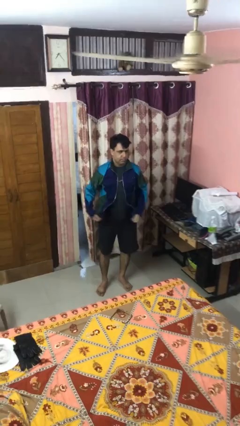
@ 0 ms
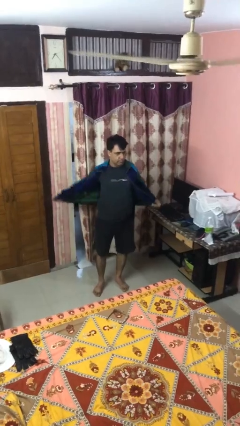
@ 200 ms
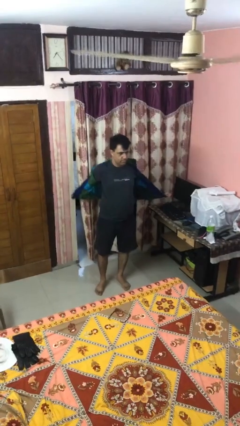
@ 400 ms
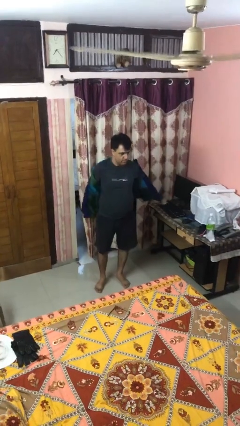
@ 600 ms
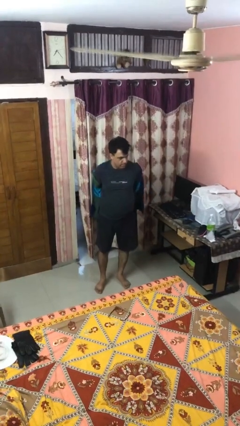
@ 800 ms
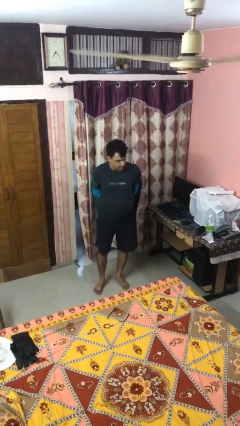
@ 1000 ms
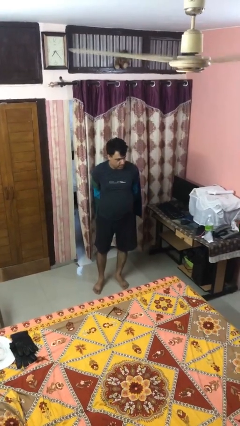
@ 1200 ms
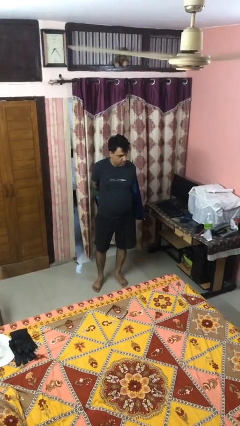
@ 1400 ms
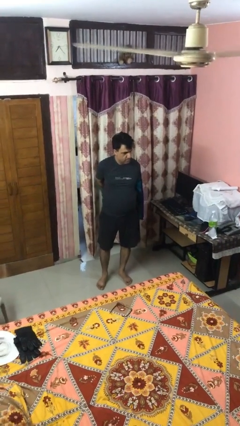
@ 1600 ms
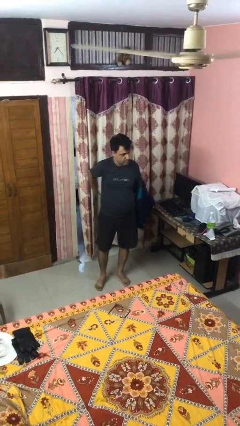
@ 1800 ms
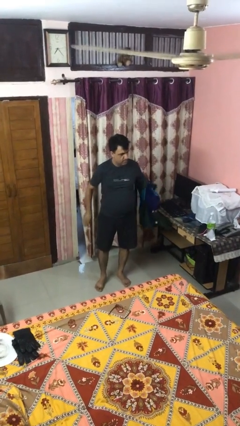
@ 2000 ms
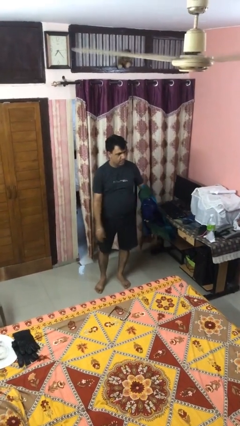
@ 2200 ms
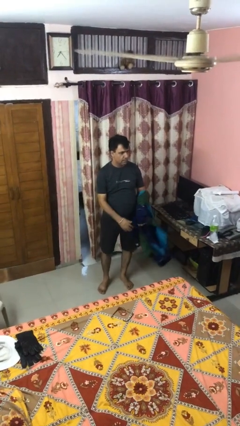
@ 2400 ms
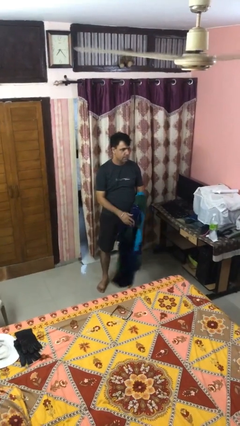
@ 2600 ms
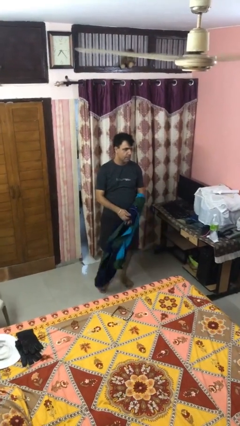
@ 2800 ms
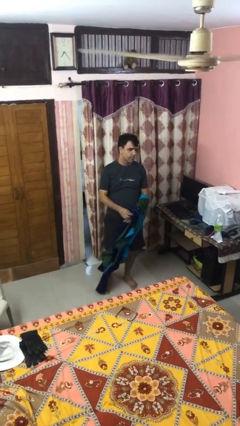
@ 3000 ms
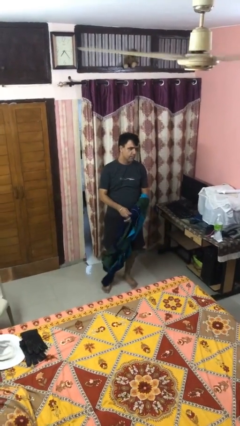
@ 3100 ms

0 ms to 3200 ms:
person takes off jacket

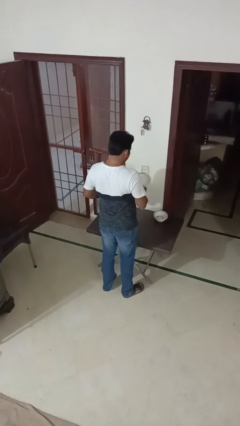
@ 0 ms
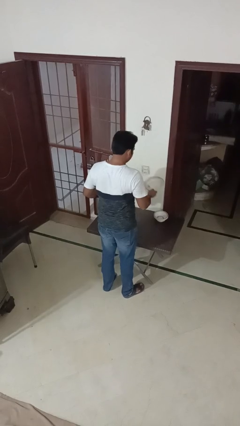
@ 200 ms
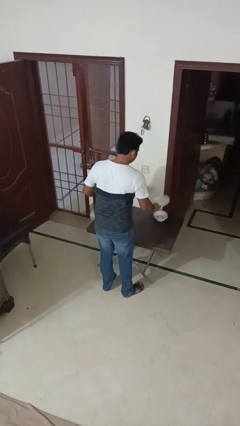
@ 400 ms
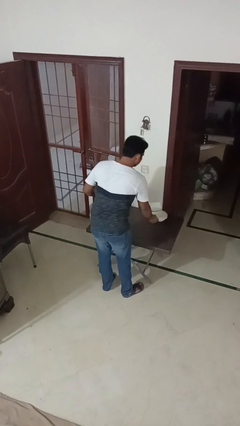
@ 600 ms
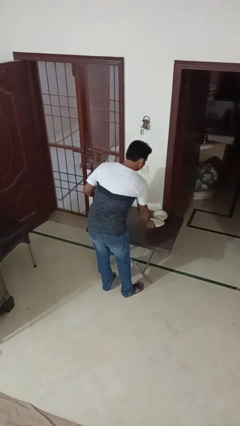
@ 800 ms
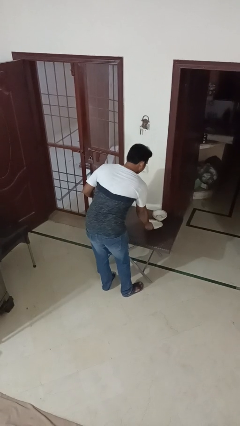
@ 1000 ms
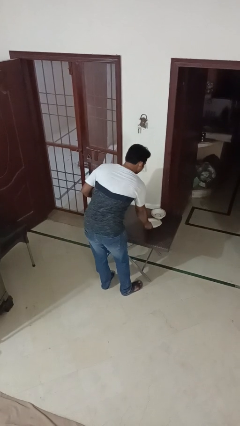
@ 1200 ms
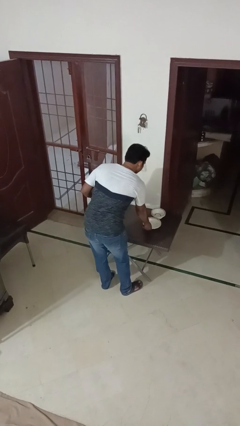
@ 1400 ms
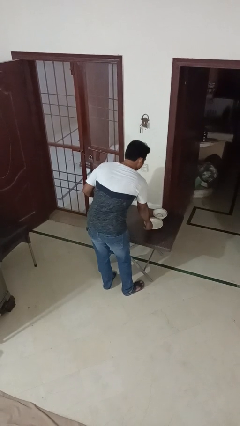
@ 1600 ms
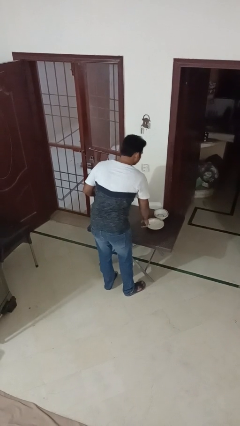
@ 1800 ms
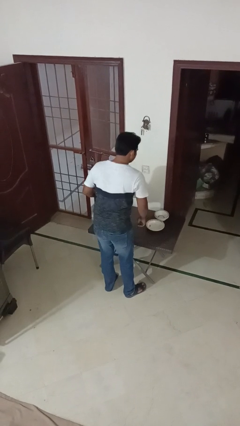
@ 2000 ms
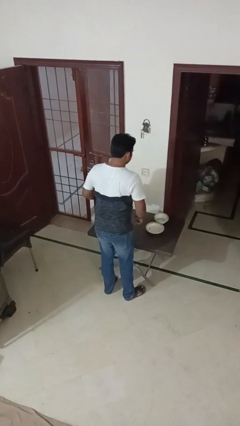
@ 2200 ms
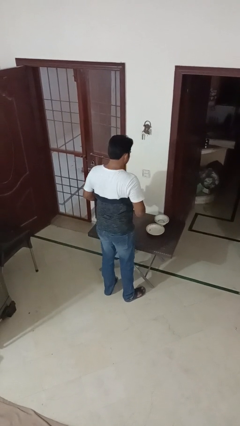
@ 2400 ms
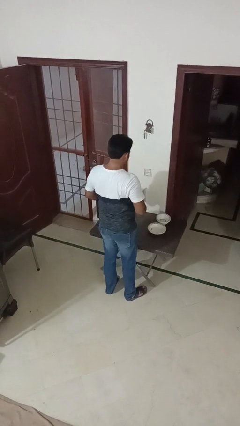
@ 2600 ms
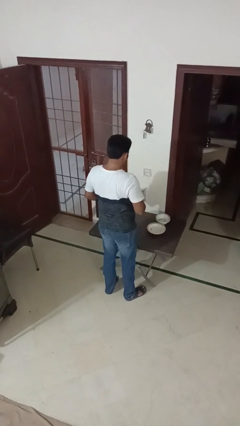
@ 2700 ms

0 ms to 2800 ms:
person sets table

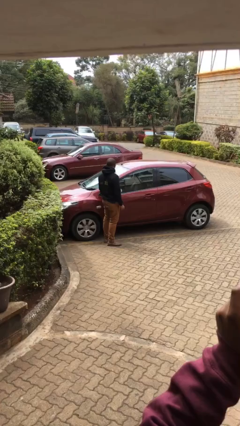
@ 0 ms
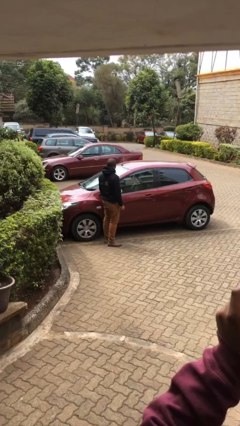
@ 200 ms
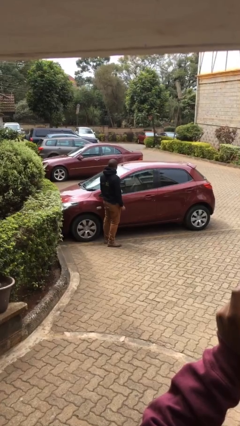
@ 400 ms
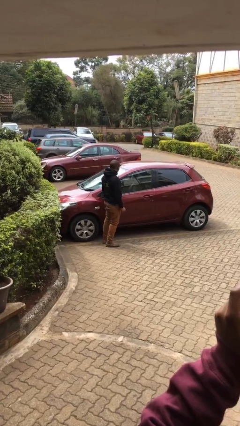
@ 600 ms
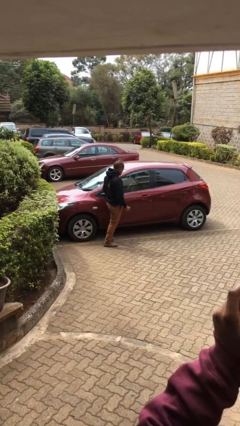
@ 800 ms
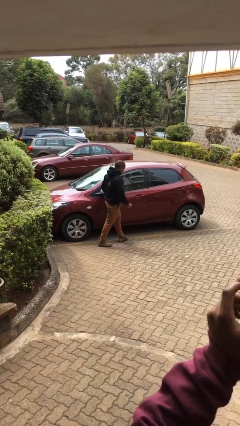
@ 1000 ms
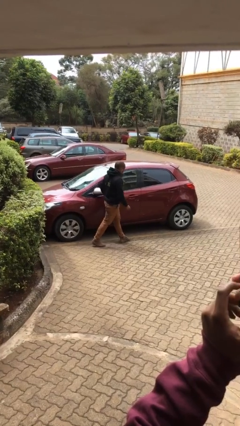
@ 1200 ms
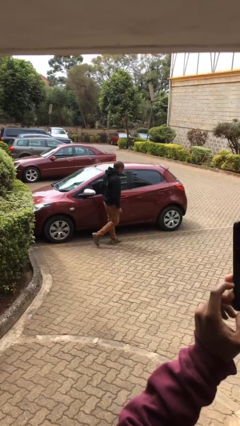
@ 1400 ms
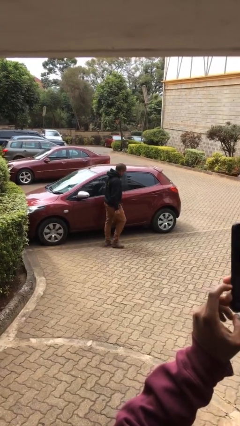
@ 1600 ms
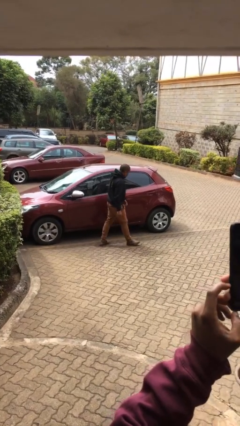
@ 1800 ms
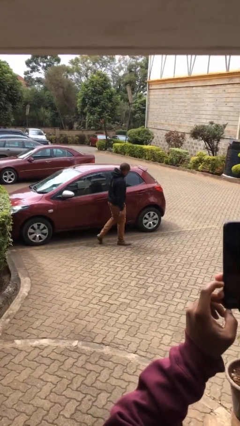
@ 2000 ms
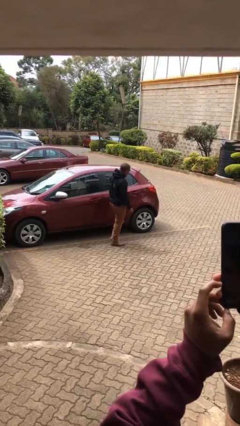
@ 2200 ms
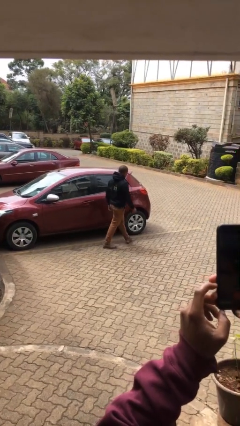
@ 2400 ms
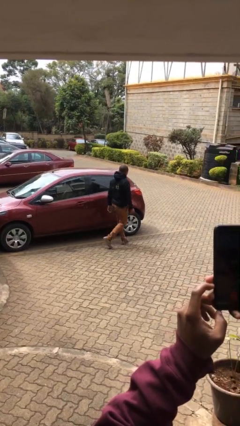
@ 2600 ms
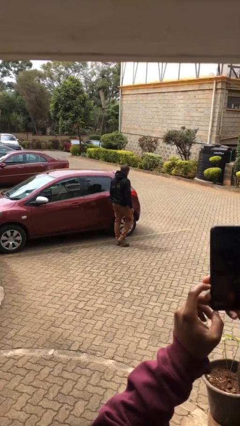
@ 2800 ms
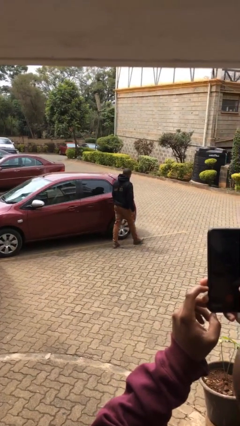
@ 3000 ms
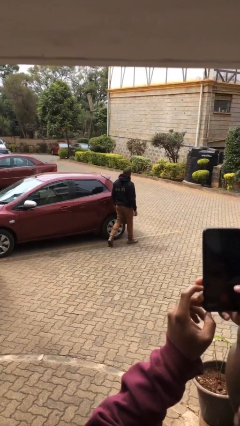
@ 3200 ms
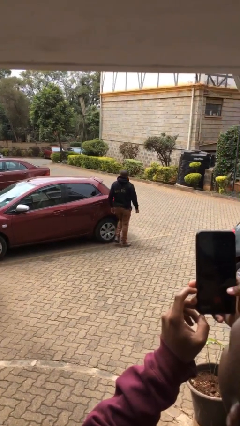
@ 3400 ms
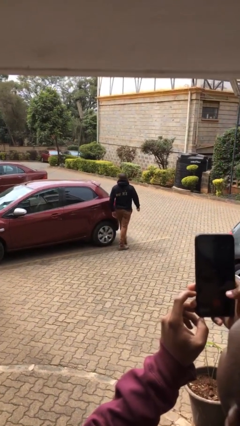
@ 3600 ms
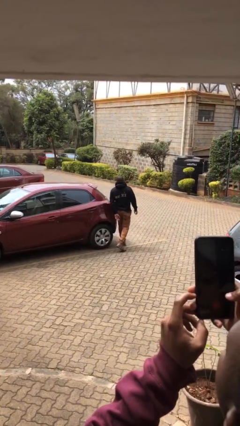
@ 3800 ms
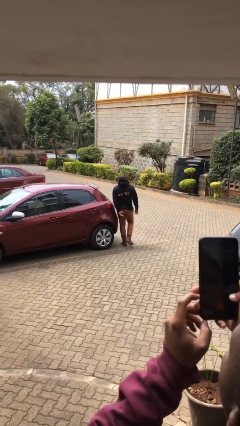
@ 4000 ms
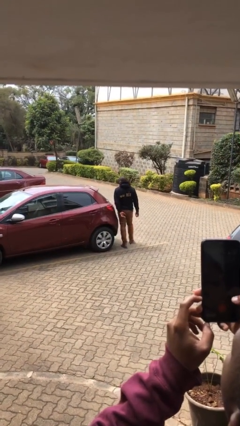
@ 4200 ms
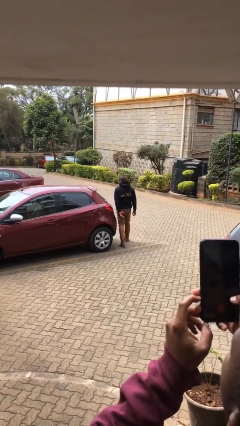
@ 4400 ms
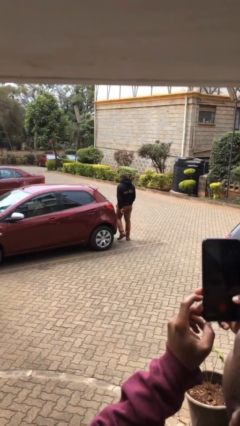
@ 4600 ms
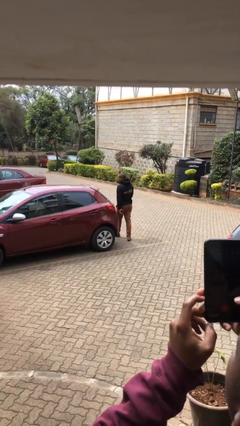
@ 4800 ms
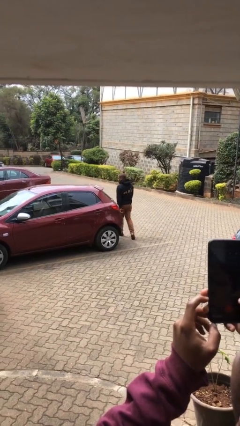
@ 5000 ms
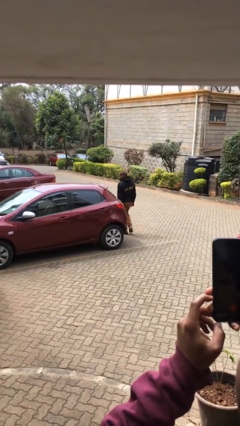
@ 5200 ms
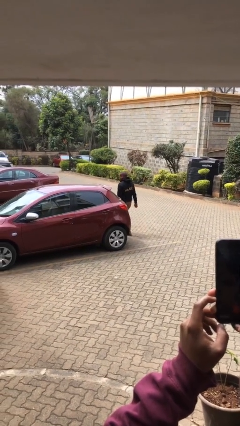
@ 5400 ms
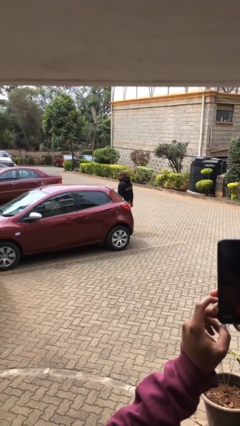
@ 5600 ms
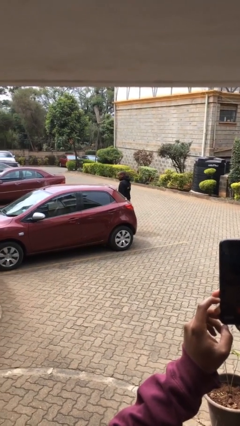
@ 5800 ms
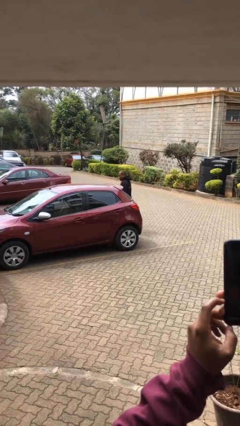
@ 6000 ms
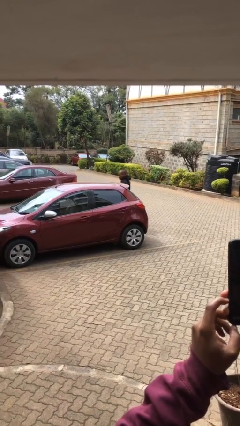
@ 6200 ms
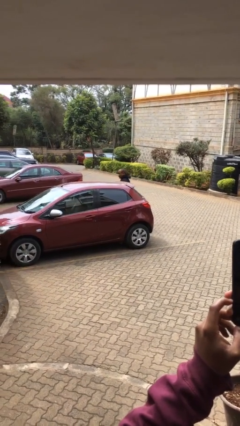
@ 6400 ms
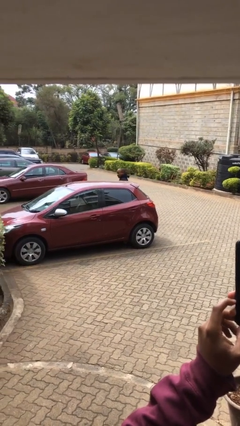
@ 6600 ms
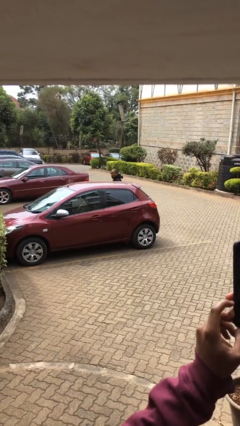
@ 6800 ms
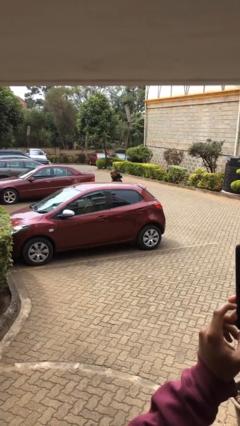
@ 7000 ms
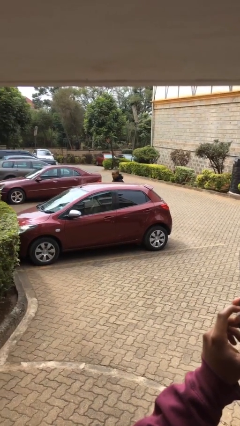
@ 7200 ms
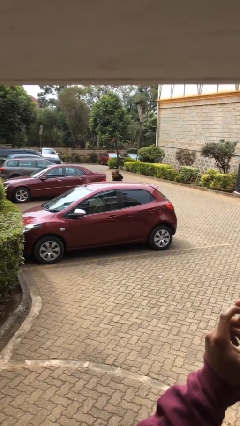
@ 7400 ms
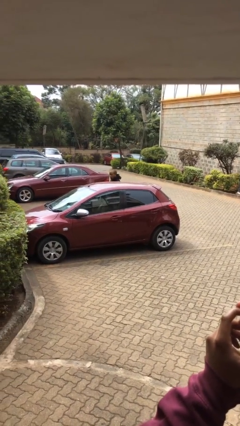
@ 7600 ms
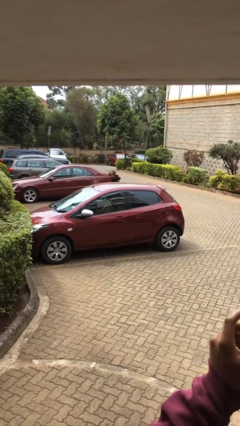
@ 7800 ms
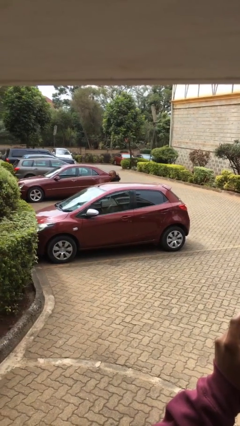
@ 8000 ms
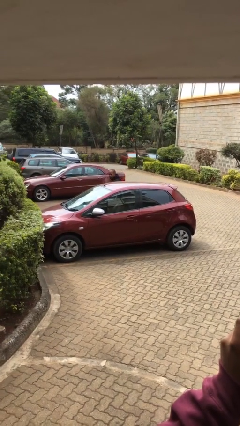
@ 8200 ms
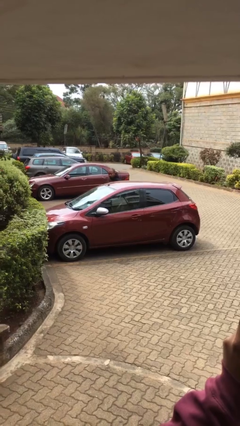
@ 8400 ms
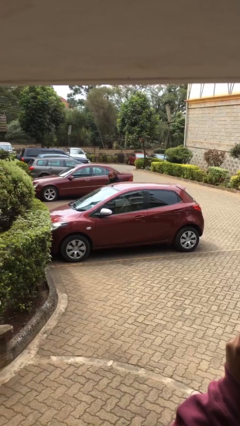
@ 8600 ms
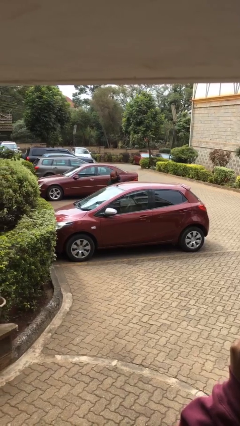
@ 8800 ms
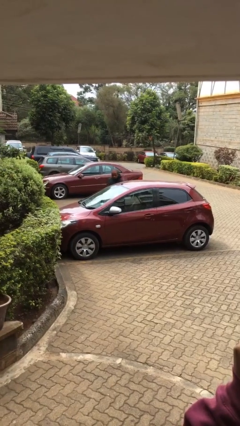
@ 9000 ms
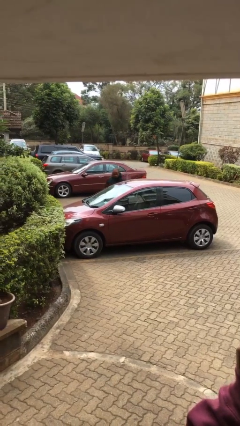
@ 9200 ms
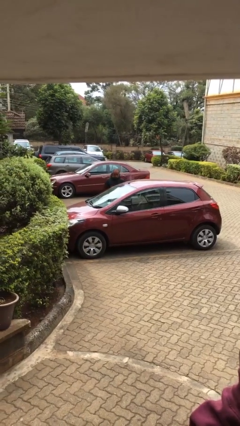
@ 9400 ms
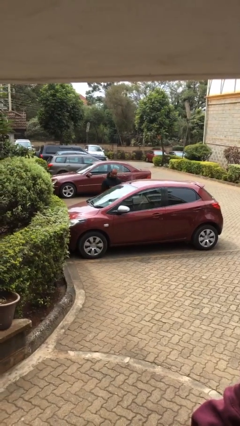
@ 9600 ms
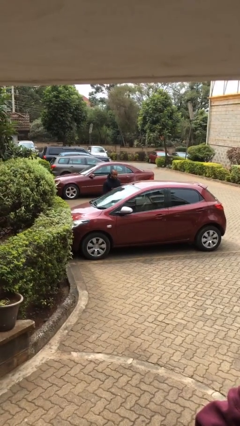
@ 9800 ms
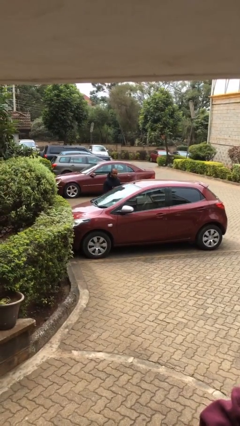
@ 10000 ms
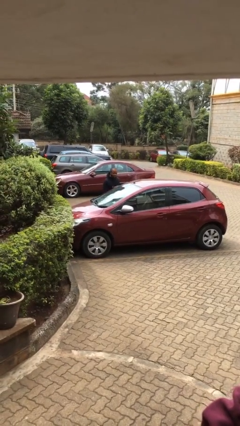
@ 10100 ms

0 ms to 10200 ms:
person walks around car

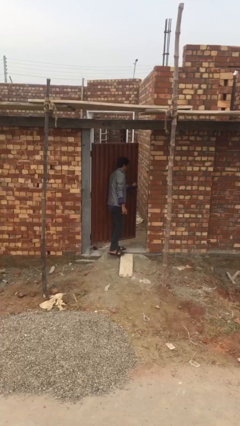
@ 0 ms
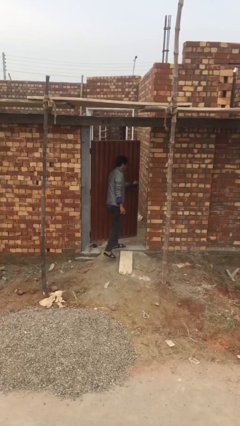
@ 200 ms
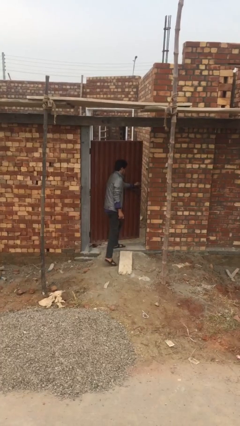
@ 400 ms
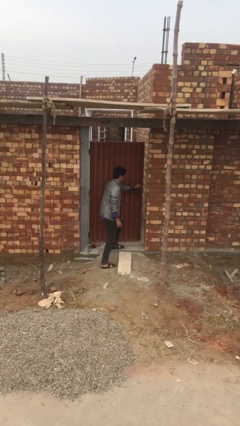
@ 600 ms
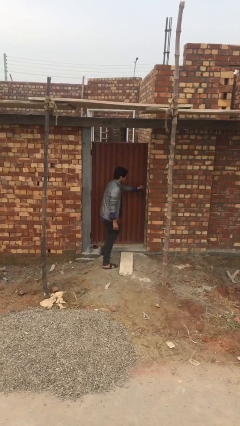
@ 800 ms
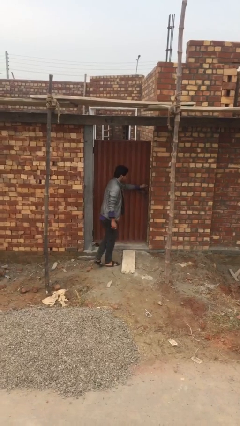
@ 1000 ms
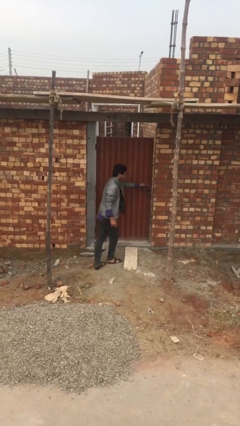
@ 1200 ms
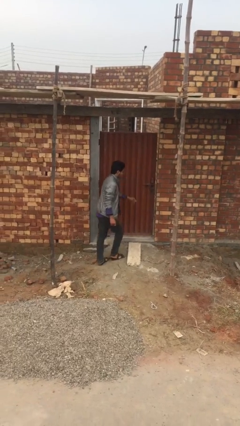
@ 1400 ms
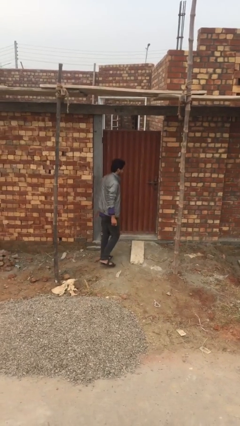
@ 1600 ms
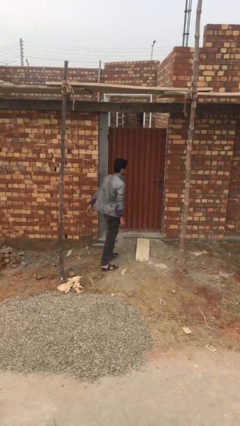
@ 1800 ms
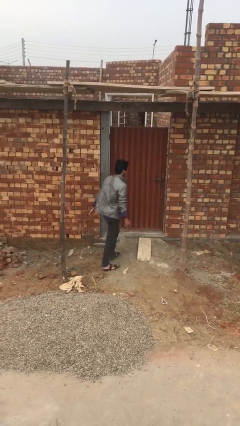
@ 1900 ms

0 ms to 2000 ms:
person closes facility door
